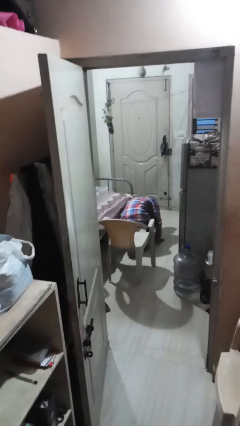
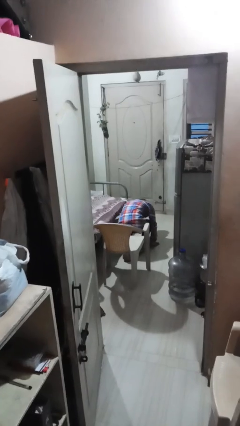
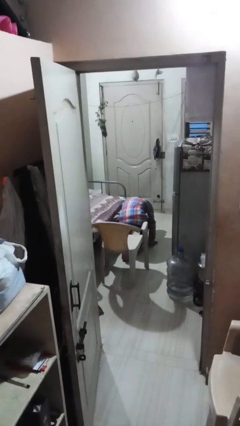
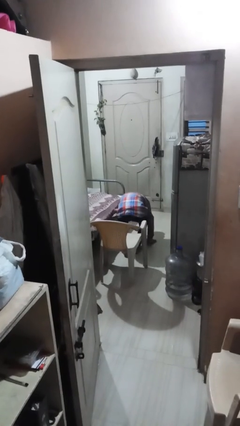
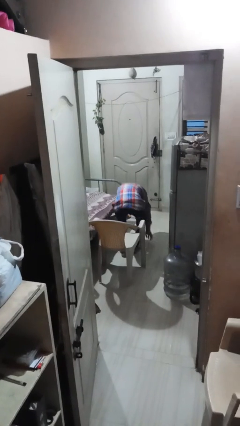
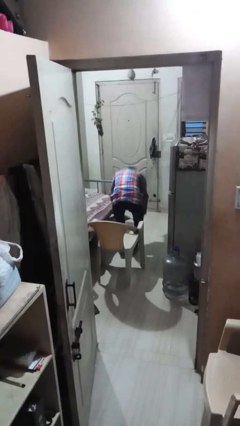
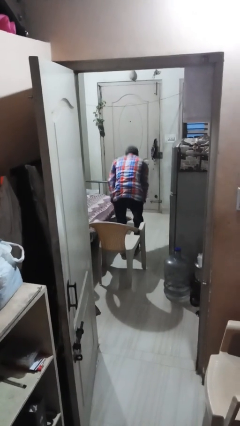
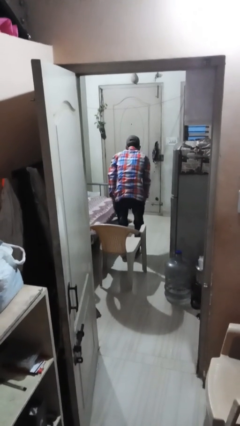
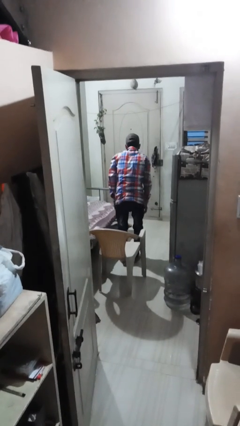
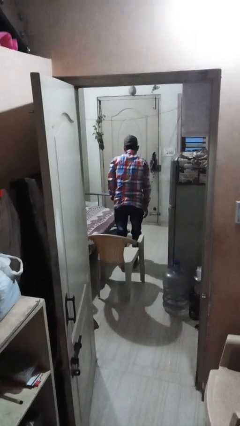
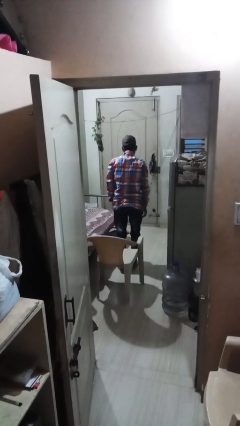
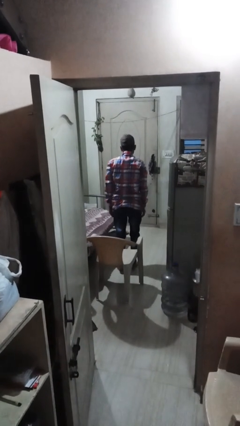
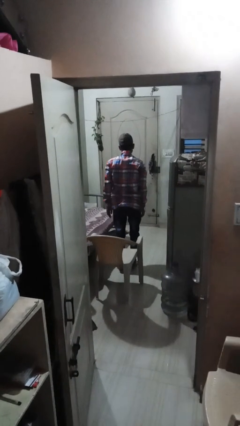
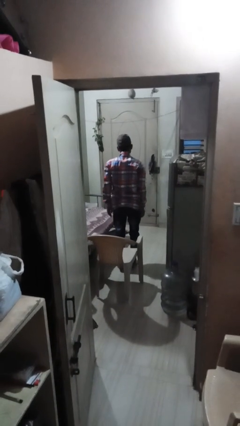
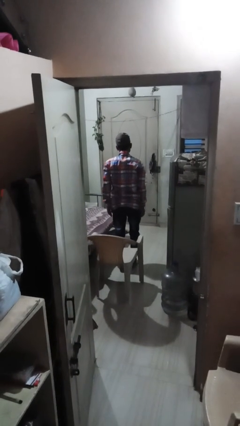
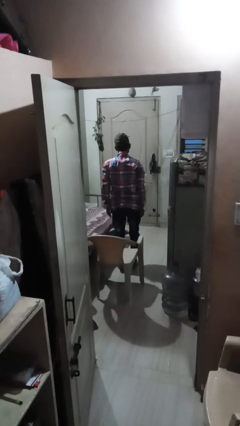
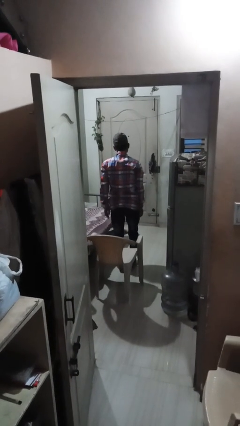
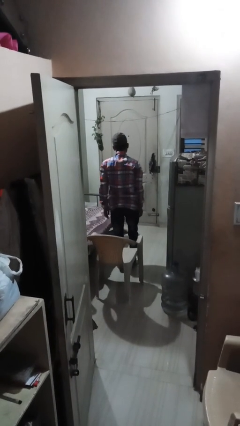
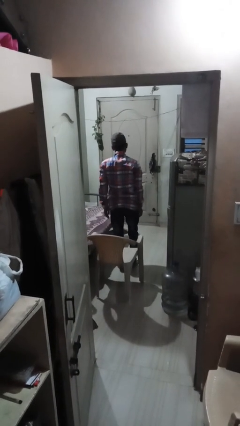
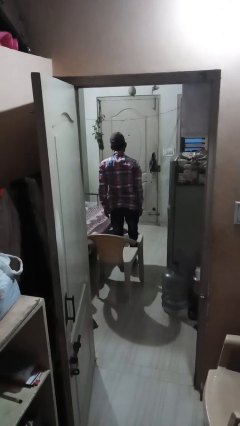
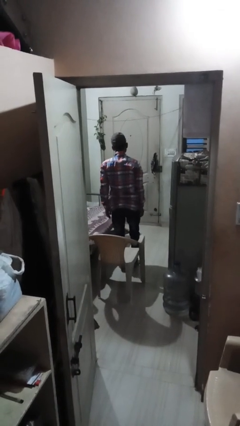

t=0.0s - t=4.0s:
person stands up from floor

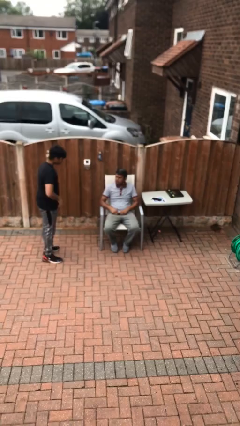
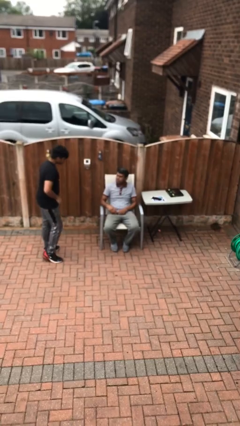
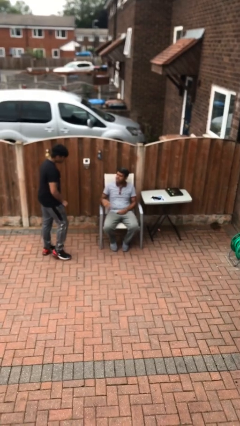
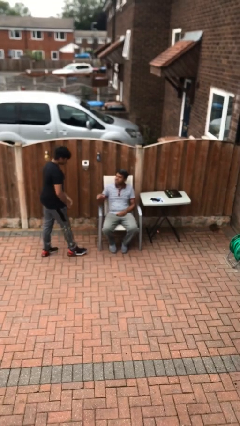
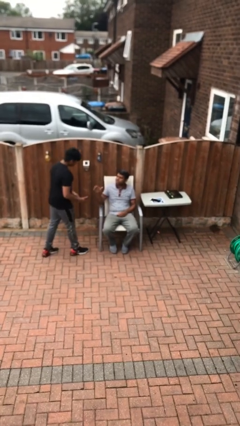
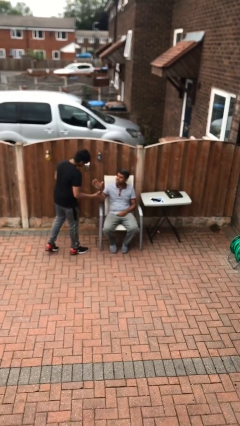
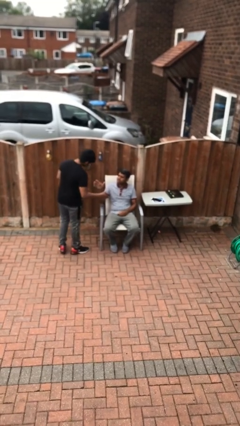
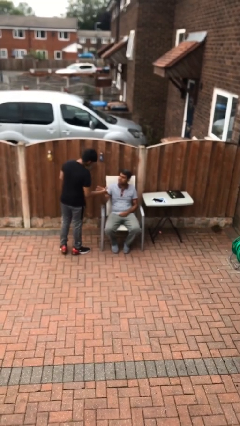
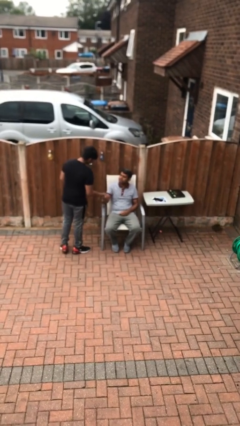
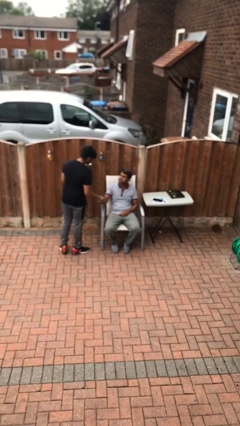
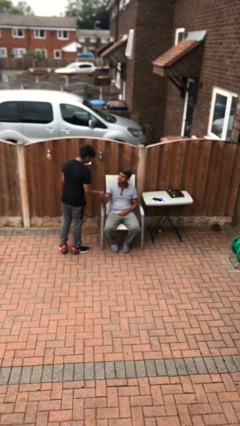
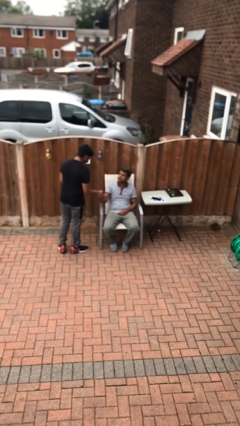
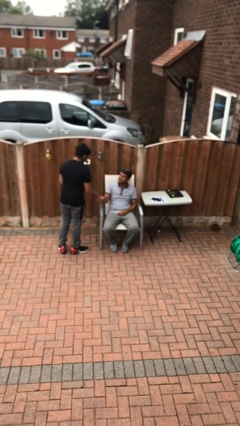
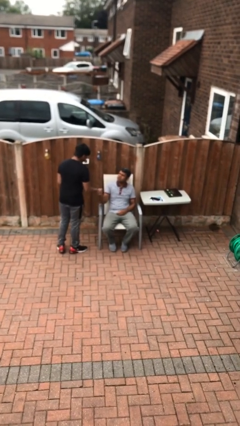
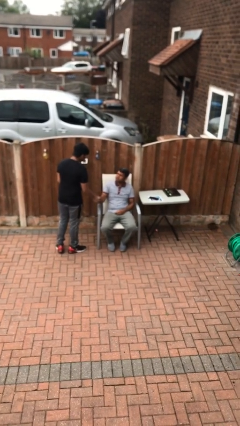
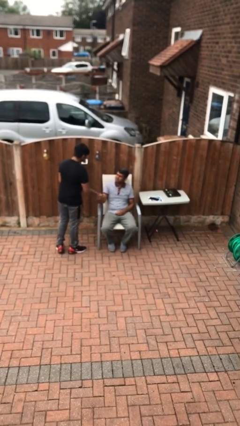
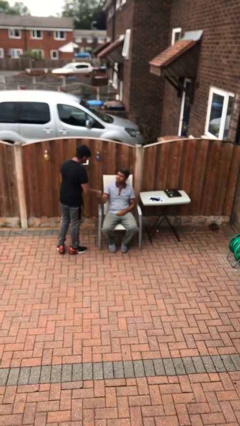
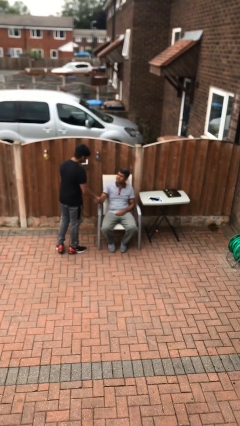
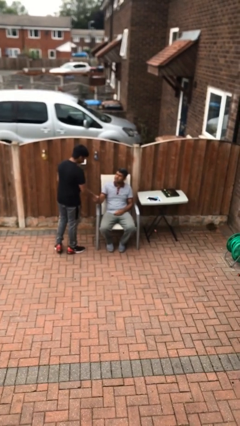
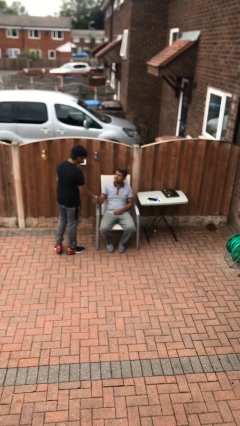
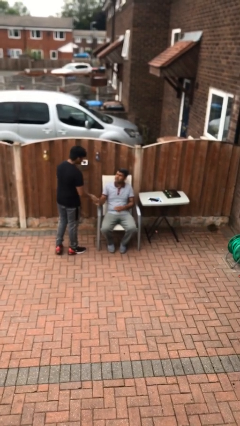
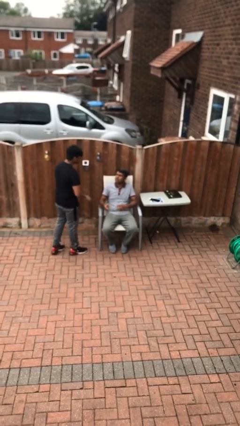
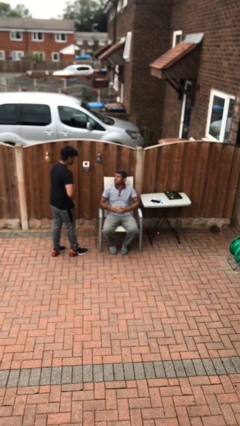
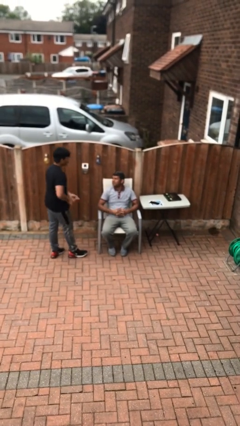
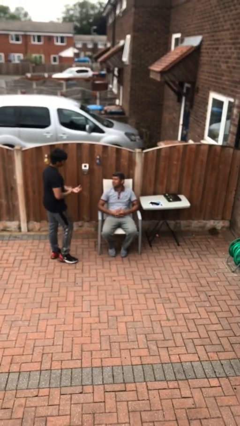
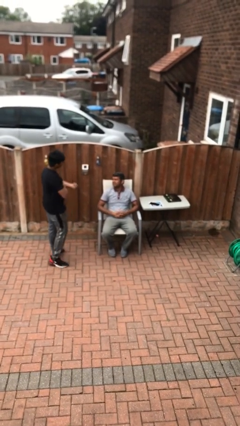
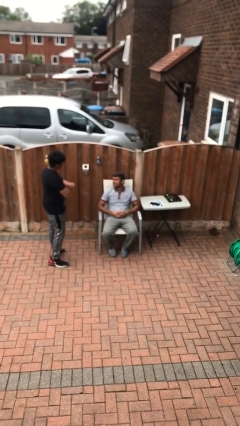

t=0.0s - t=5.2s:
person shakes hand

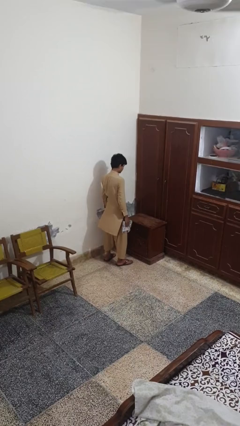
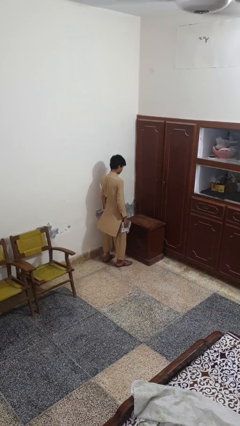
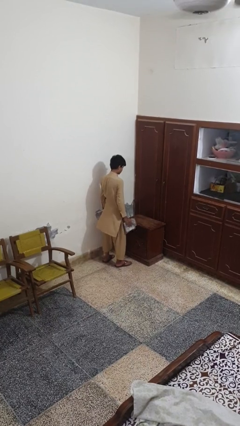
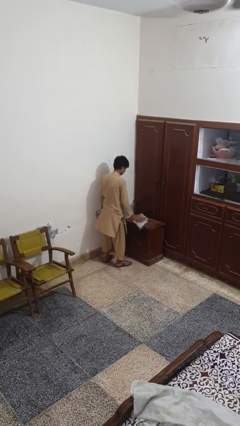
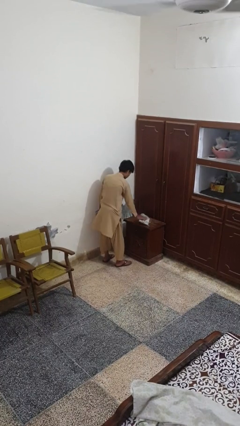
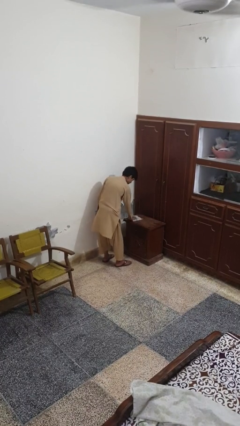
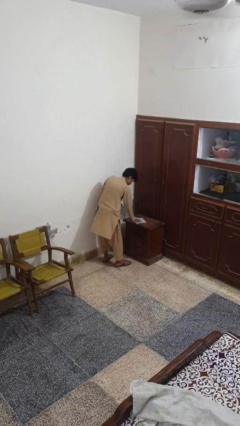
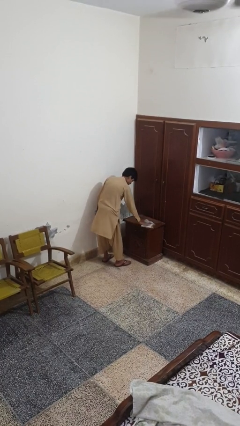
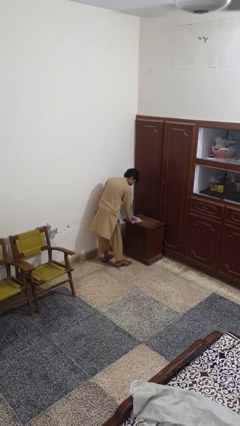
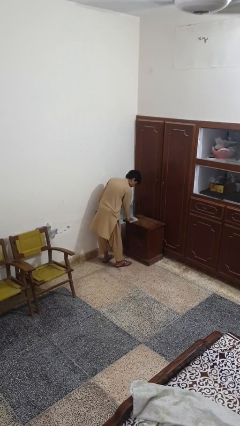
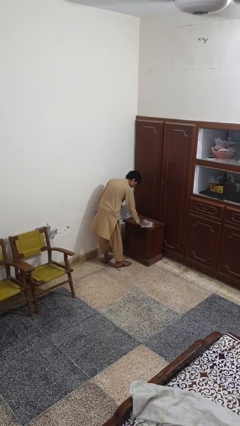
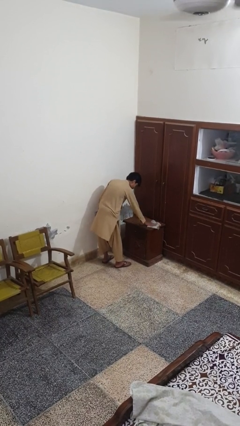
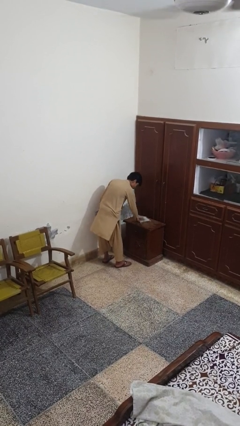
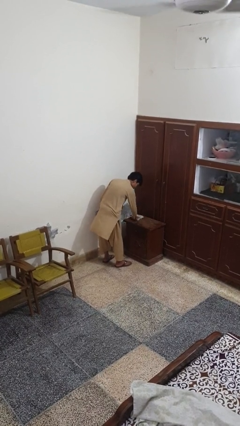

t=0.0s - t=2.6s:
person cleans table with rag

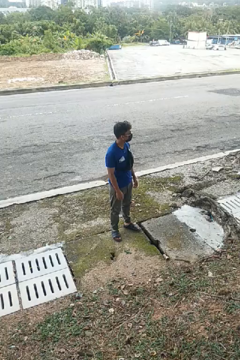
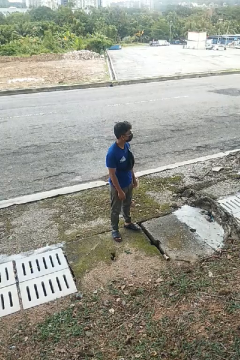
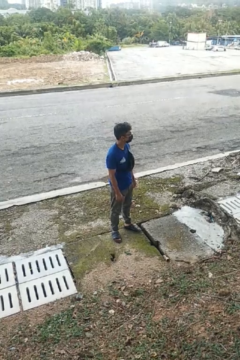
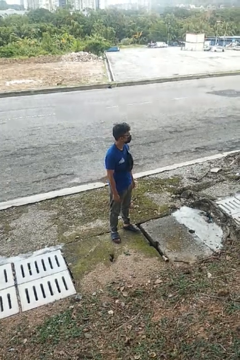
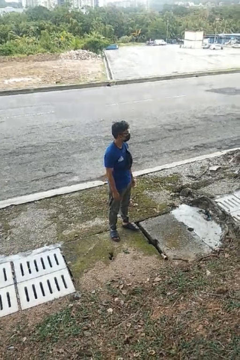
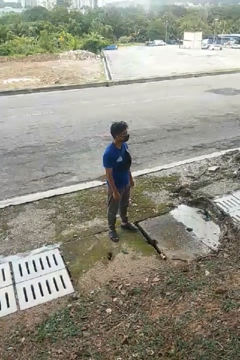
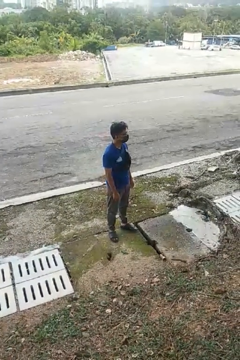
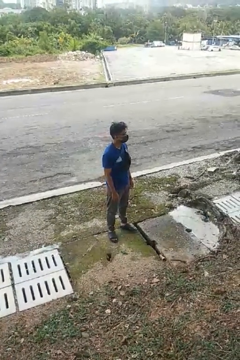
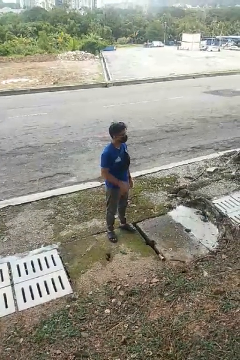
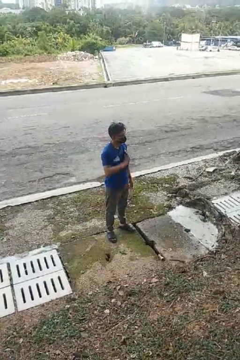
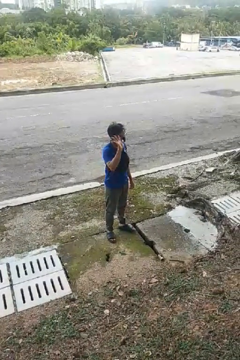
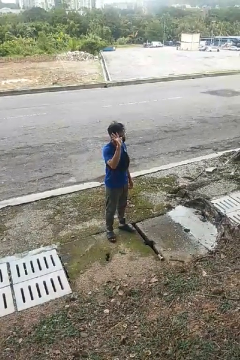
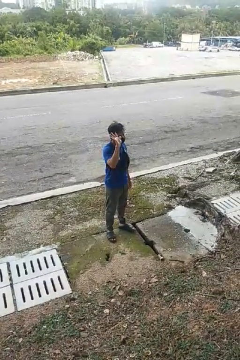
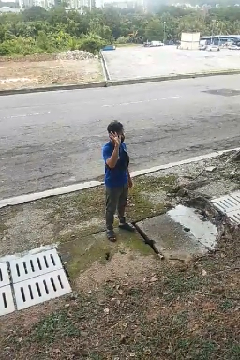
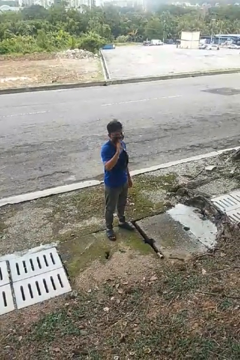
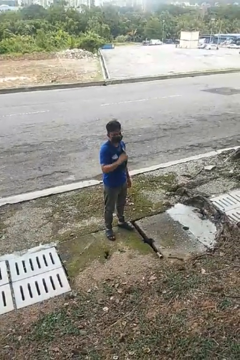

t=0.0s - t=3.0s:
person gestures number five

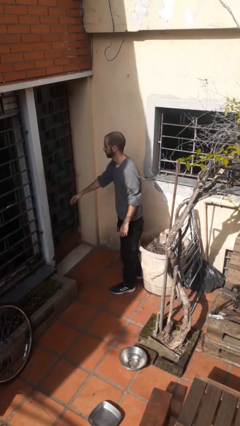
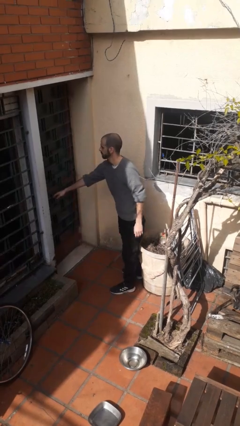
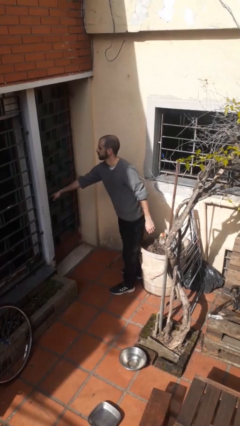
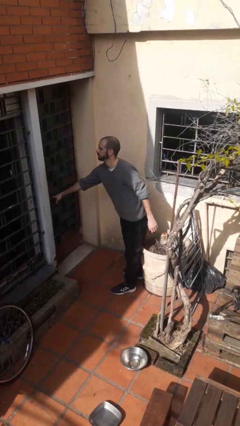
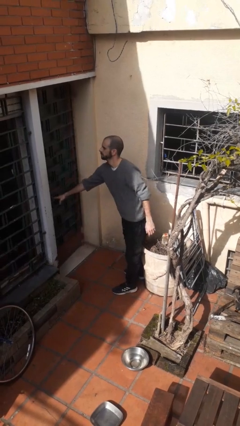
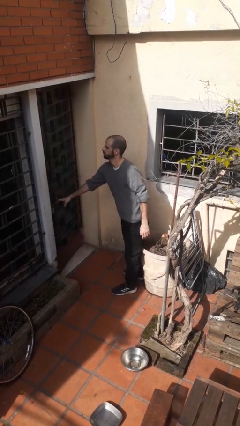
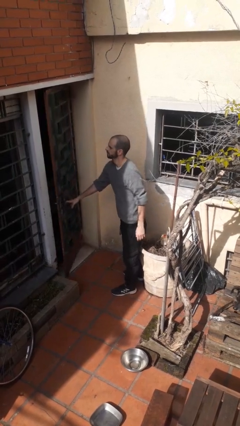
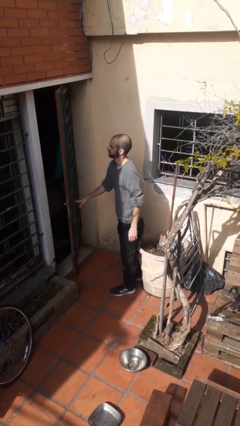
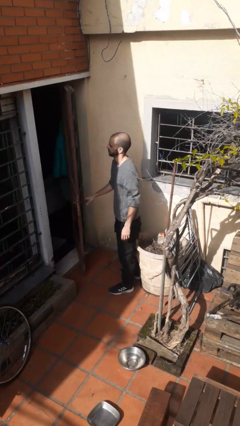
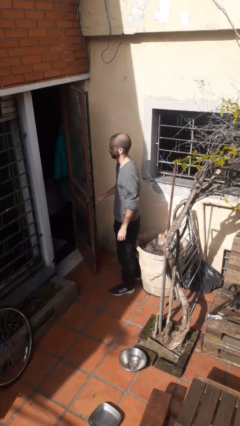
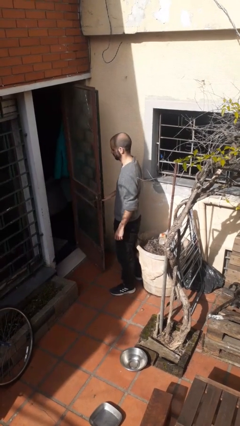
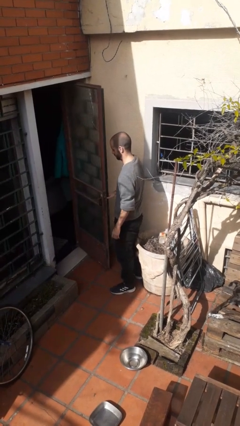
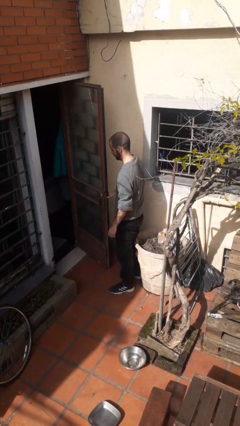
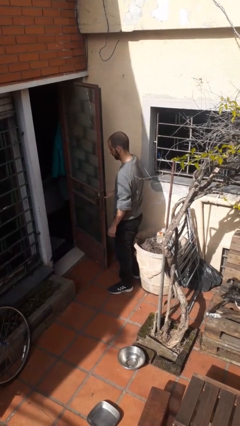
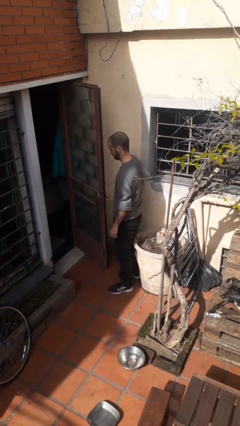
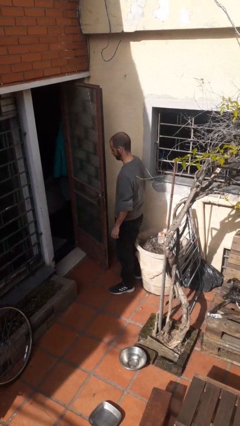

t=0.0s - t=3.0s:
person opens facility door
